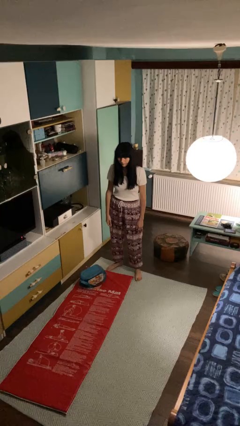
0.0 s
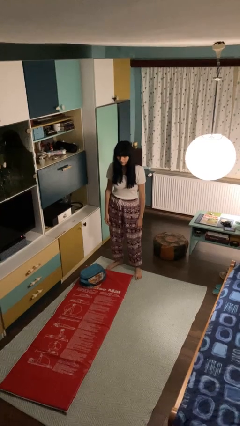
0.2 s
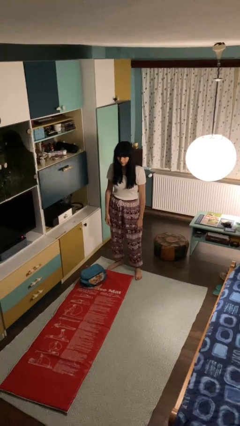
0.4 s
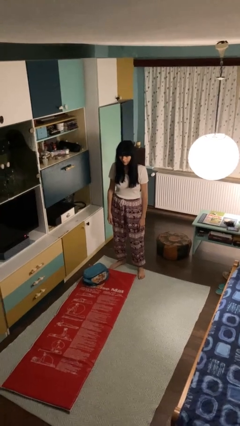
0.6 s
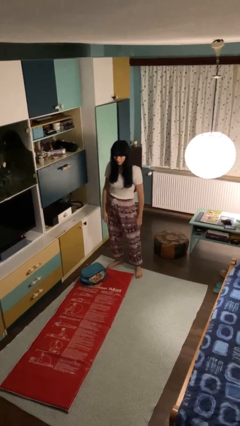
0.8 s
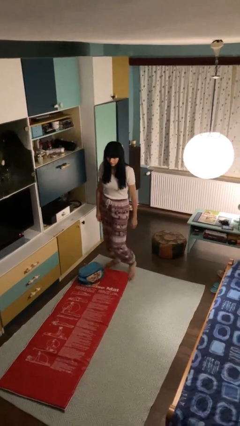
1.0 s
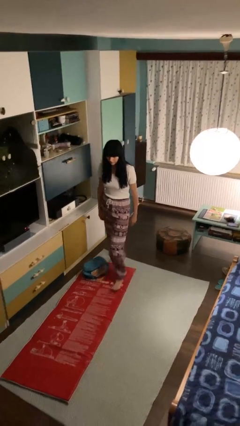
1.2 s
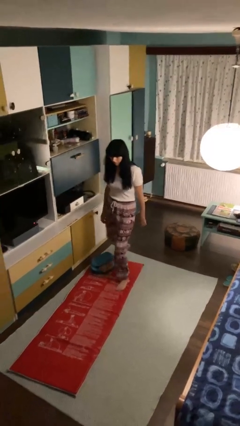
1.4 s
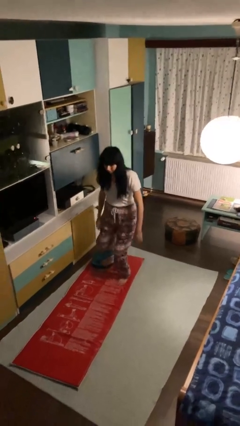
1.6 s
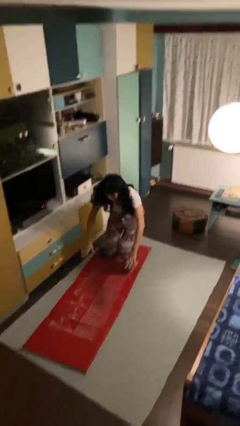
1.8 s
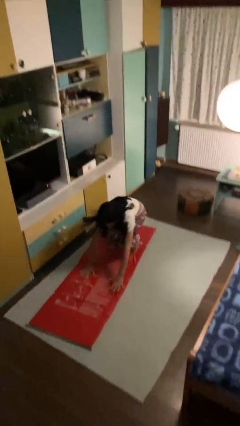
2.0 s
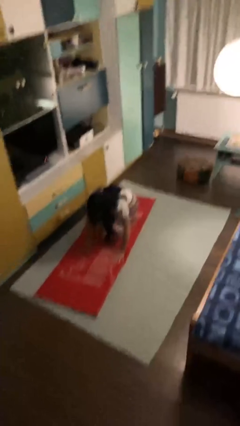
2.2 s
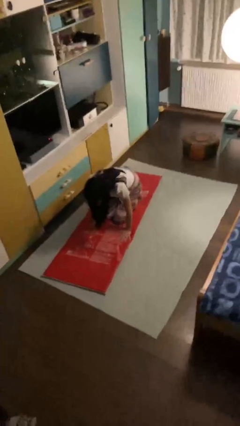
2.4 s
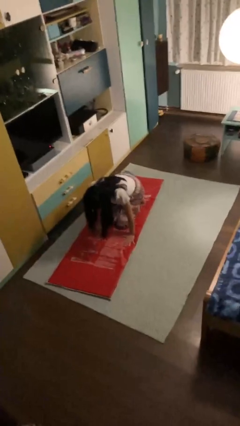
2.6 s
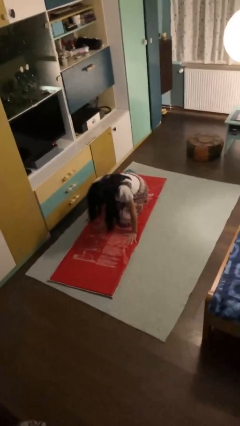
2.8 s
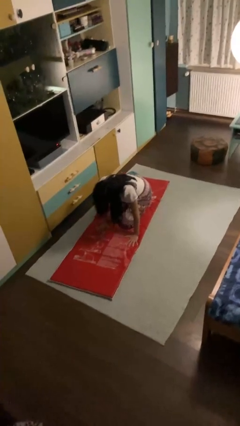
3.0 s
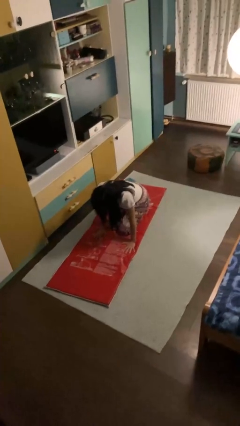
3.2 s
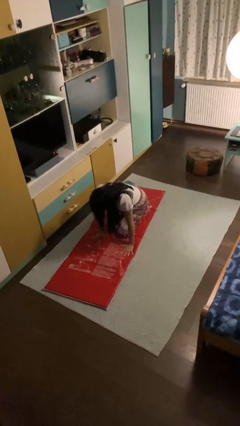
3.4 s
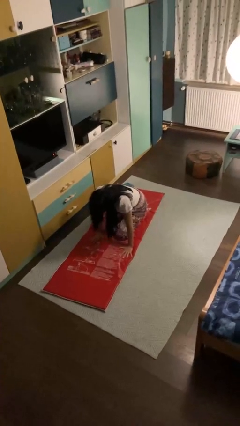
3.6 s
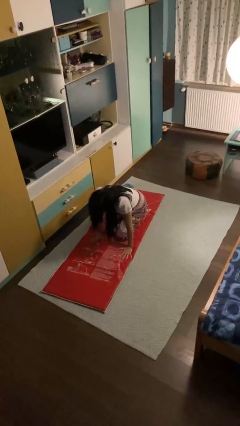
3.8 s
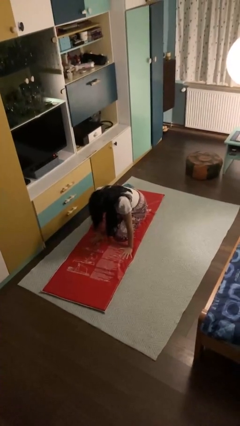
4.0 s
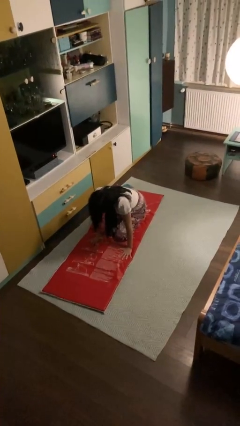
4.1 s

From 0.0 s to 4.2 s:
person trips on object on floor

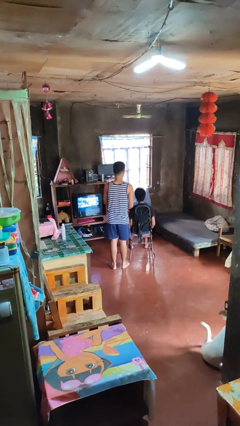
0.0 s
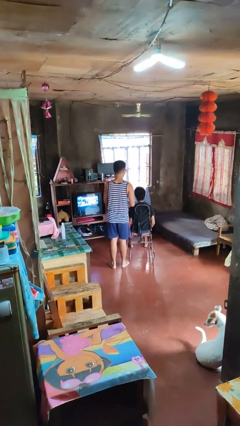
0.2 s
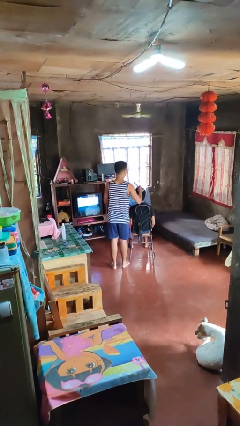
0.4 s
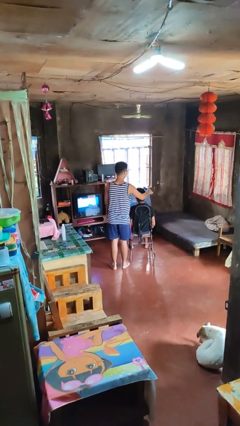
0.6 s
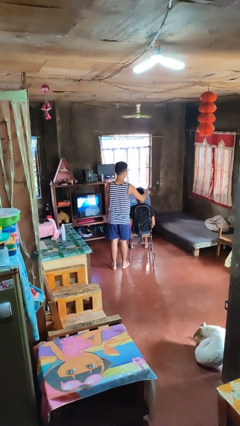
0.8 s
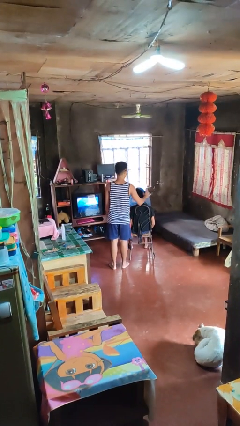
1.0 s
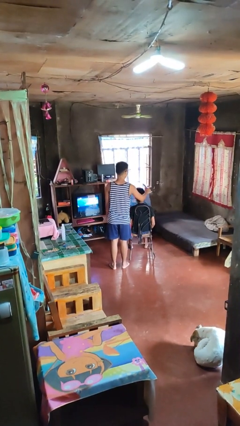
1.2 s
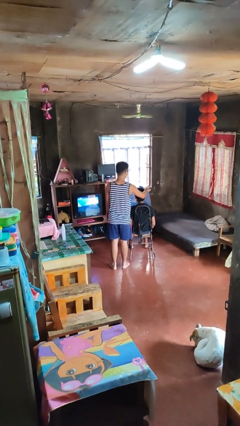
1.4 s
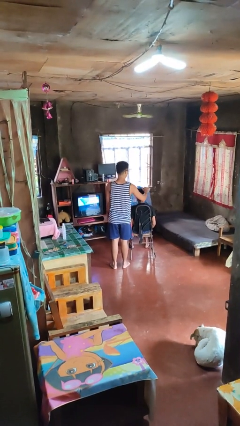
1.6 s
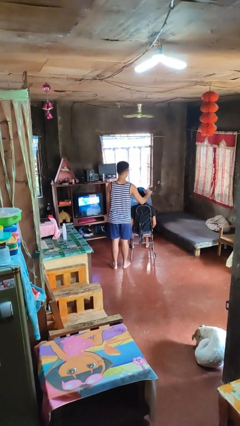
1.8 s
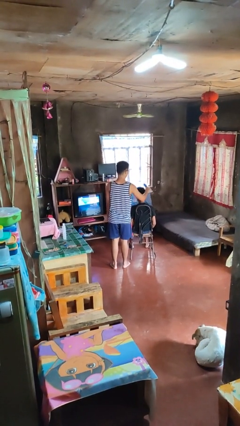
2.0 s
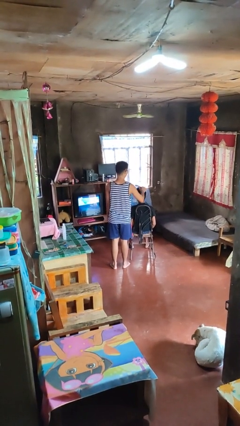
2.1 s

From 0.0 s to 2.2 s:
person brushes hair of person

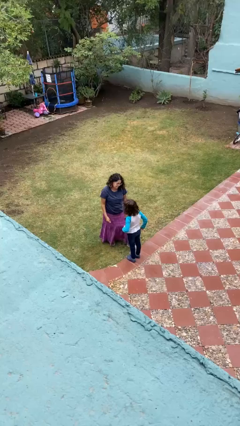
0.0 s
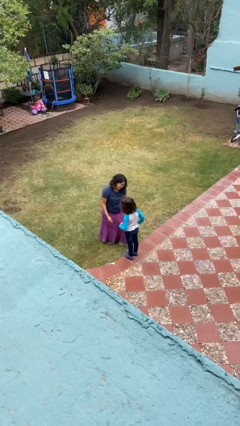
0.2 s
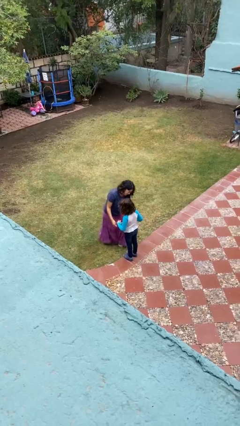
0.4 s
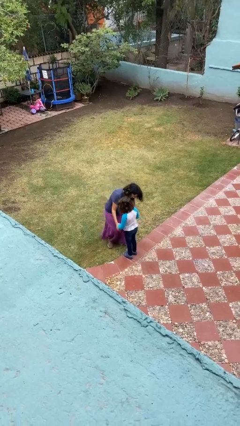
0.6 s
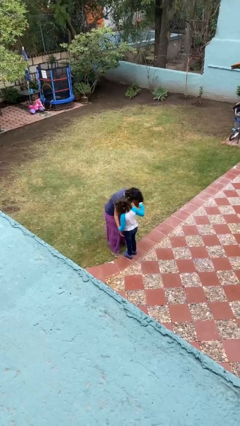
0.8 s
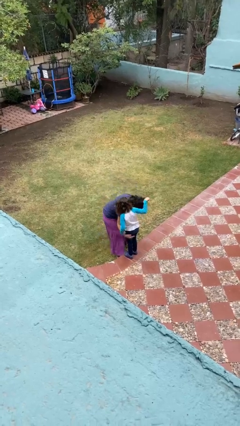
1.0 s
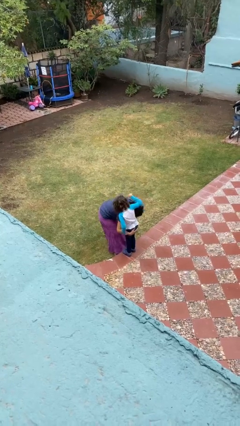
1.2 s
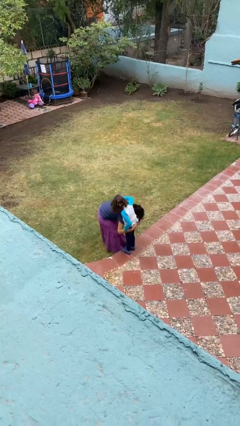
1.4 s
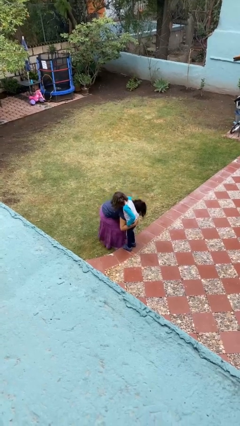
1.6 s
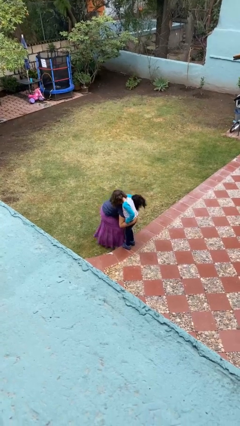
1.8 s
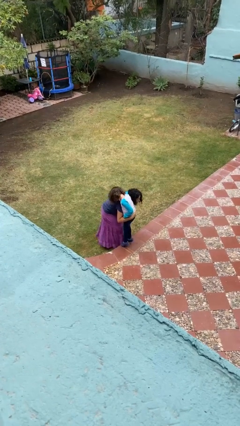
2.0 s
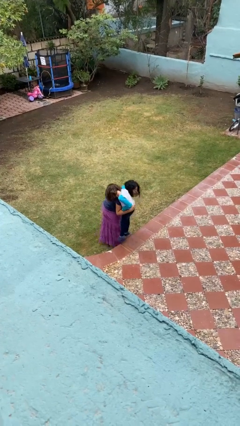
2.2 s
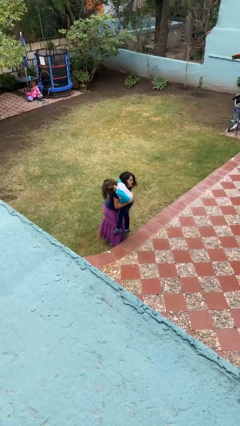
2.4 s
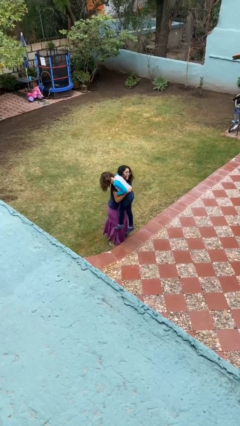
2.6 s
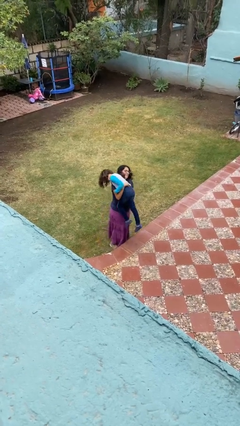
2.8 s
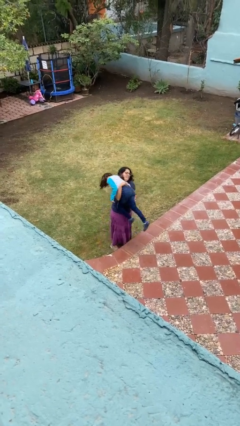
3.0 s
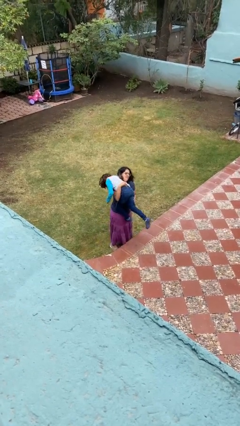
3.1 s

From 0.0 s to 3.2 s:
person carries person over shoulder

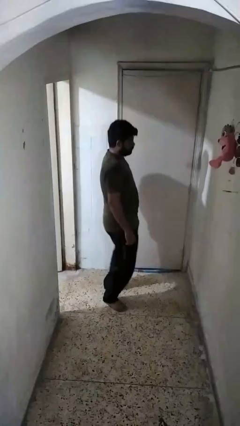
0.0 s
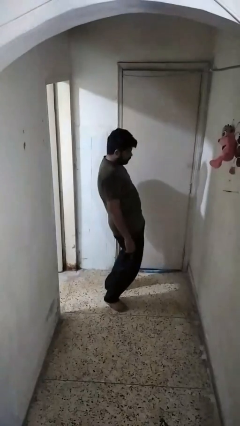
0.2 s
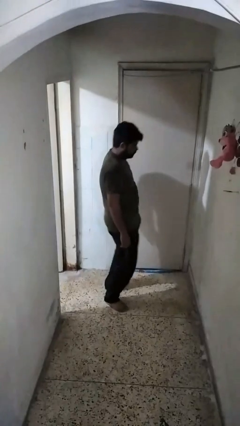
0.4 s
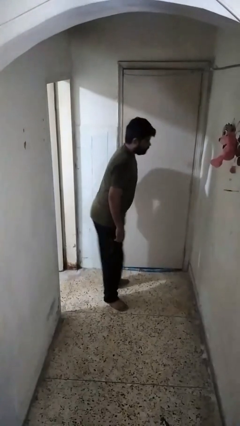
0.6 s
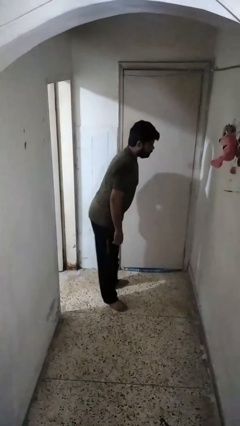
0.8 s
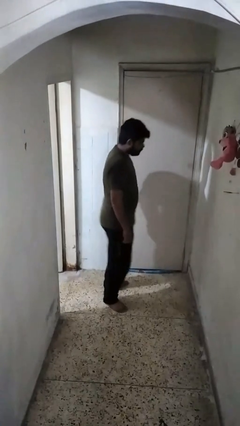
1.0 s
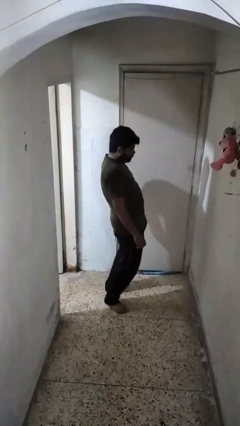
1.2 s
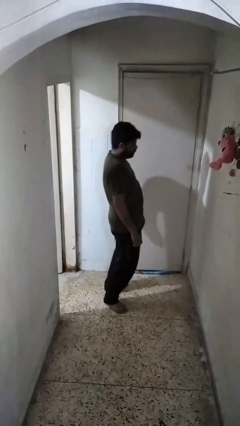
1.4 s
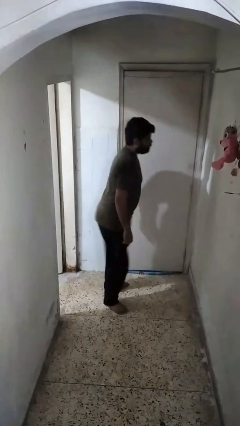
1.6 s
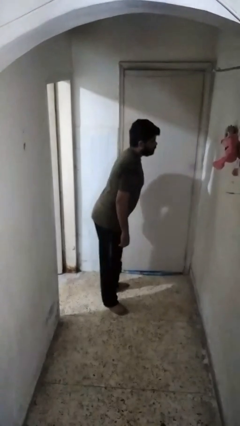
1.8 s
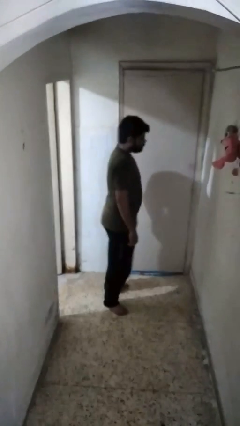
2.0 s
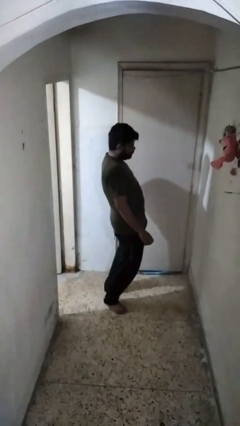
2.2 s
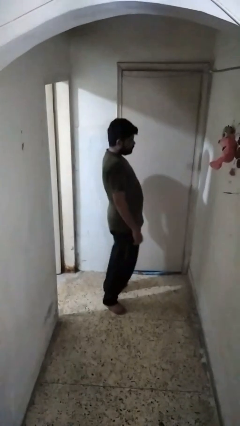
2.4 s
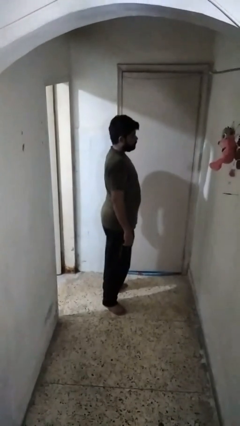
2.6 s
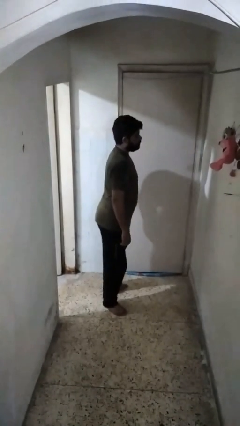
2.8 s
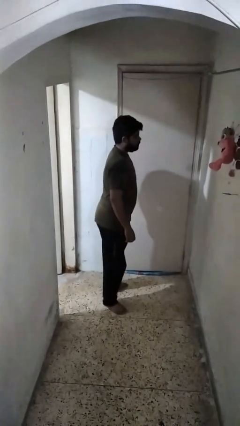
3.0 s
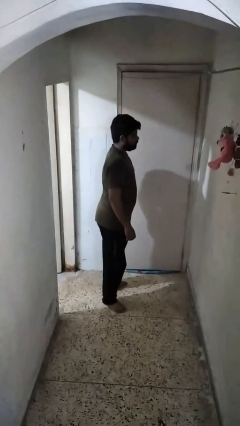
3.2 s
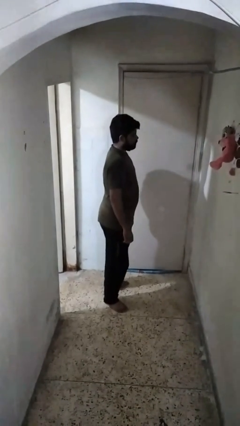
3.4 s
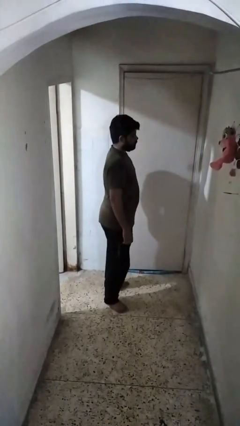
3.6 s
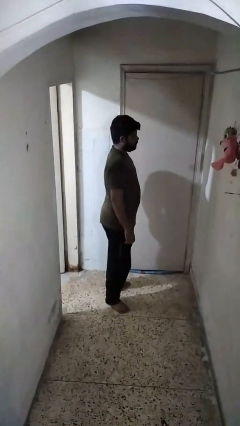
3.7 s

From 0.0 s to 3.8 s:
person wiggles hips

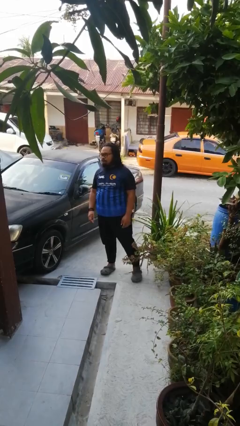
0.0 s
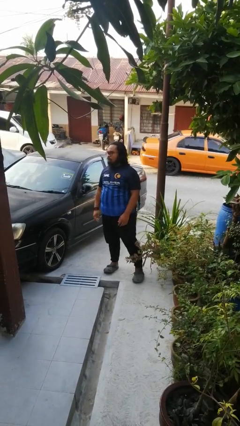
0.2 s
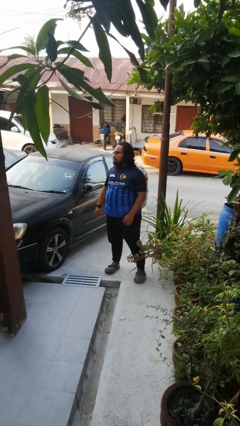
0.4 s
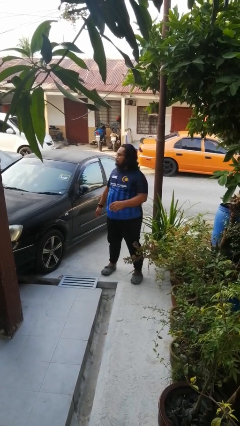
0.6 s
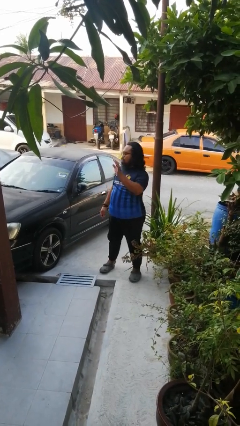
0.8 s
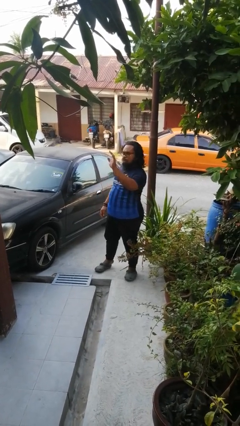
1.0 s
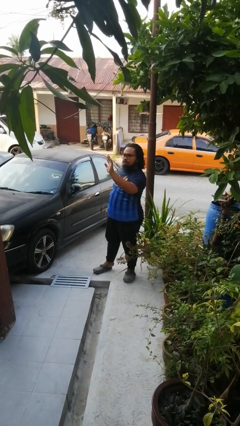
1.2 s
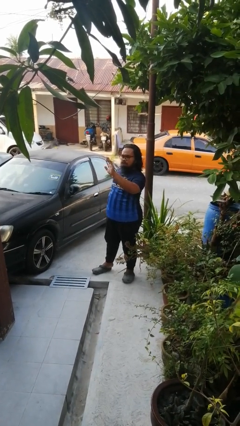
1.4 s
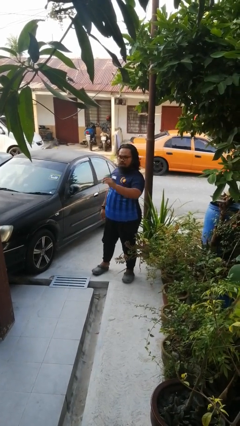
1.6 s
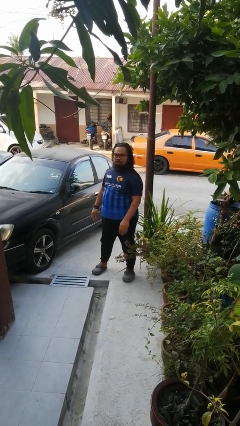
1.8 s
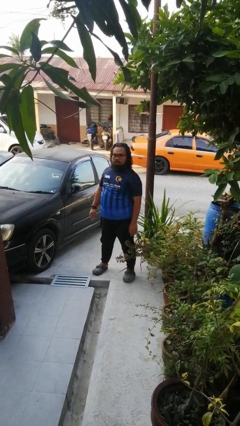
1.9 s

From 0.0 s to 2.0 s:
person waves at person

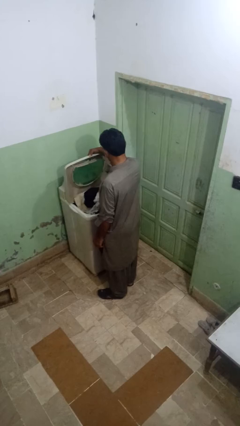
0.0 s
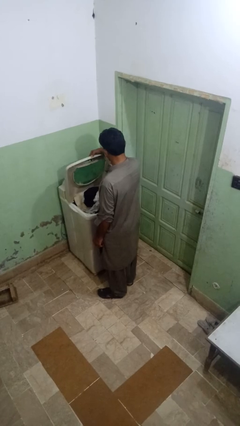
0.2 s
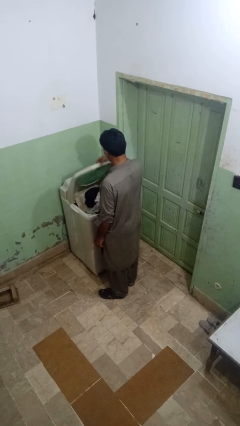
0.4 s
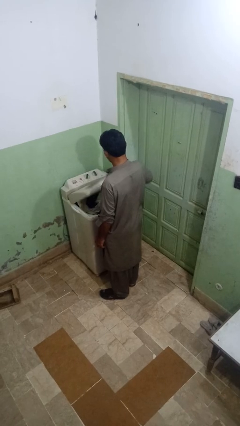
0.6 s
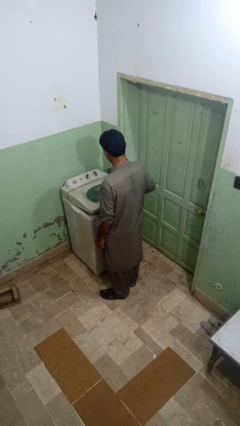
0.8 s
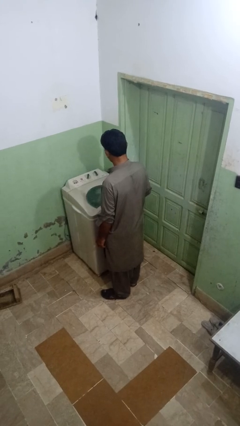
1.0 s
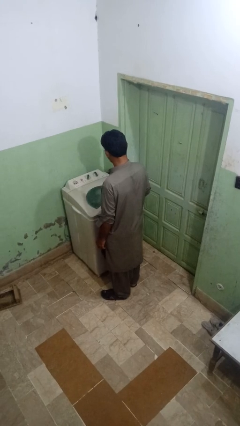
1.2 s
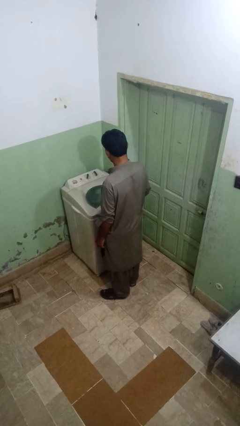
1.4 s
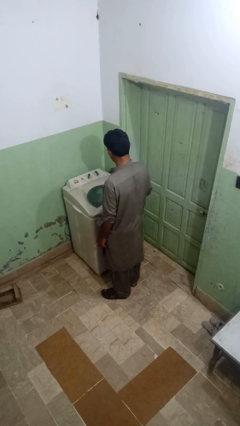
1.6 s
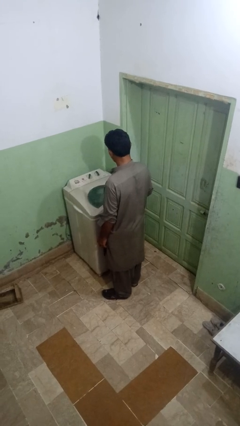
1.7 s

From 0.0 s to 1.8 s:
person closes clothes washer

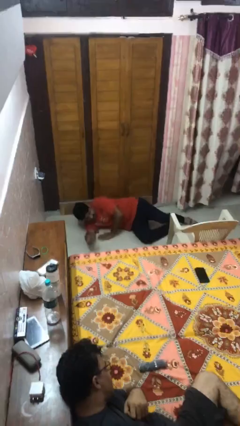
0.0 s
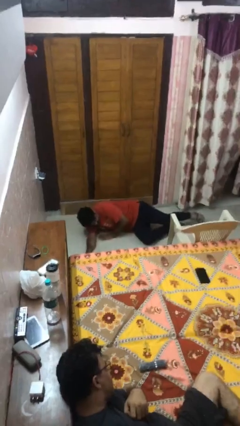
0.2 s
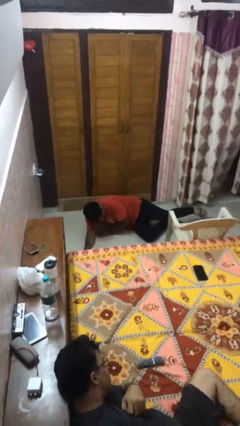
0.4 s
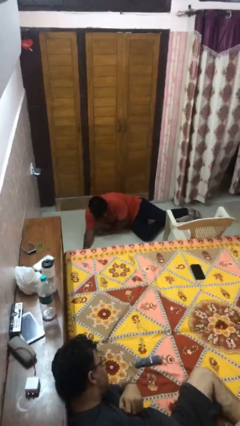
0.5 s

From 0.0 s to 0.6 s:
person lies down on floor
